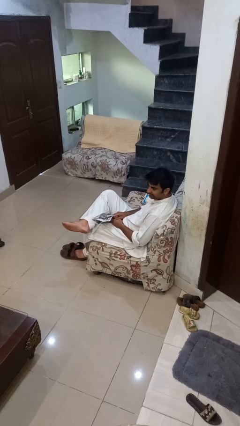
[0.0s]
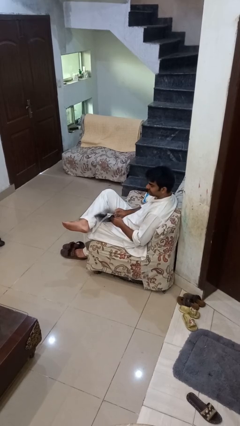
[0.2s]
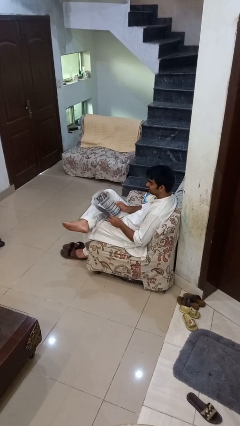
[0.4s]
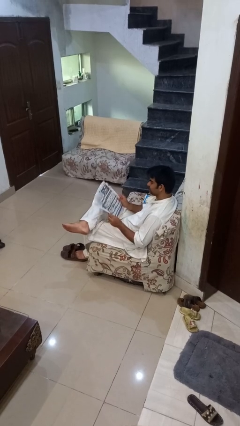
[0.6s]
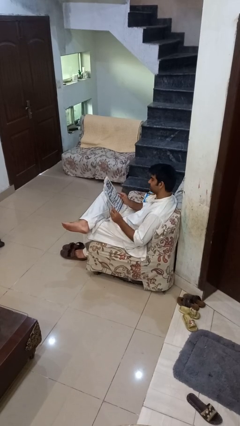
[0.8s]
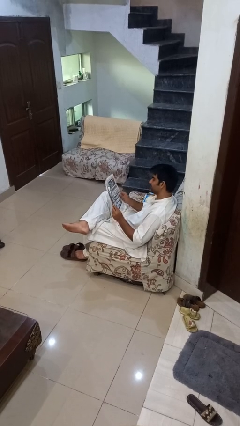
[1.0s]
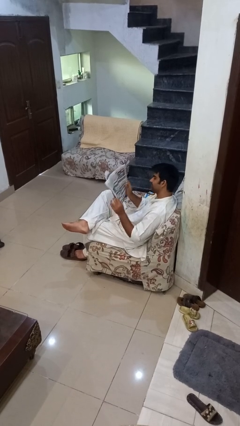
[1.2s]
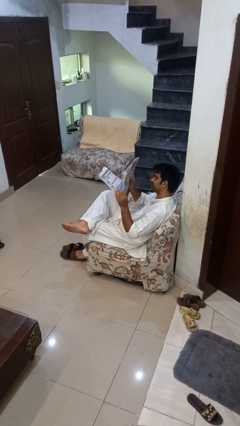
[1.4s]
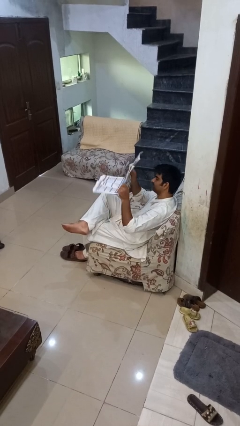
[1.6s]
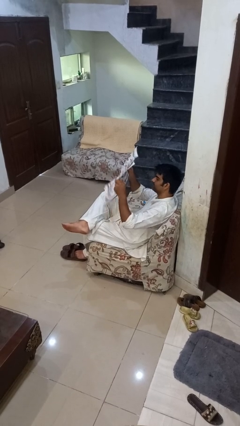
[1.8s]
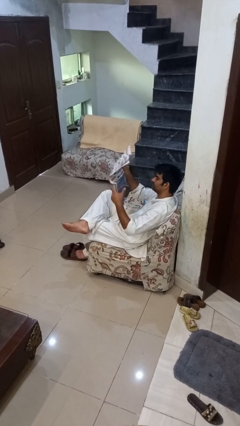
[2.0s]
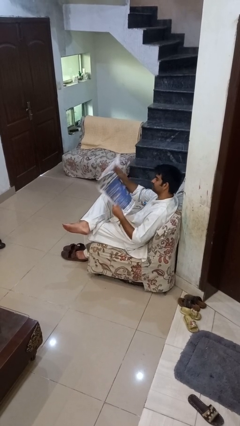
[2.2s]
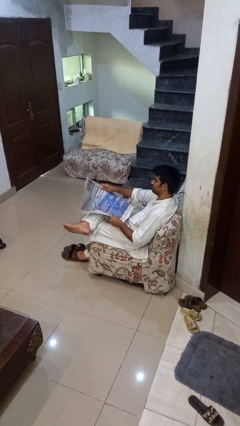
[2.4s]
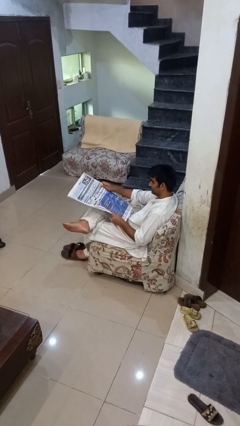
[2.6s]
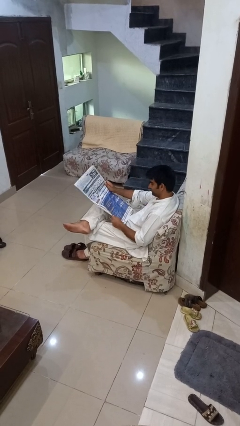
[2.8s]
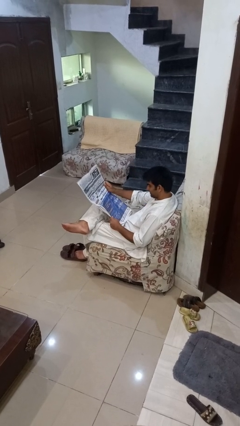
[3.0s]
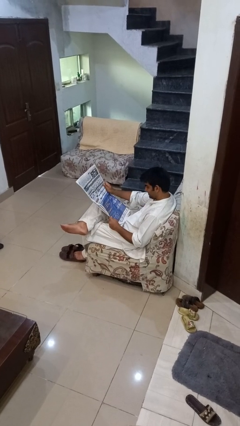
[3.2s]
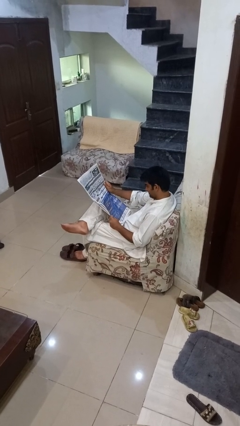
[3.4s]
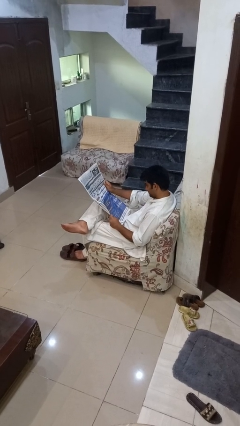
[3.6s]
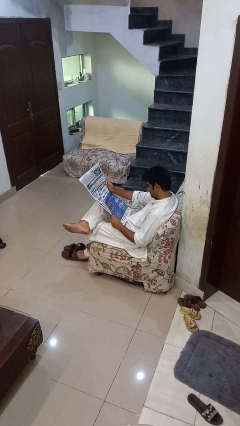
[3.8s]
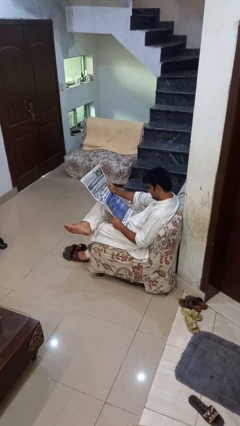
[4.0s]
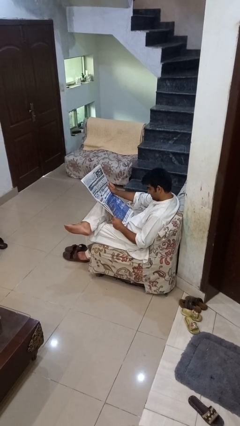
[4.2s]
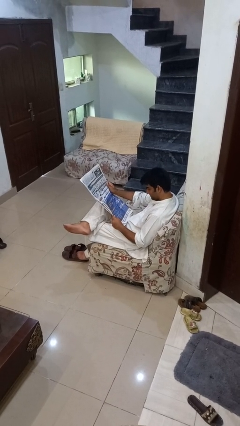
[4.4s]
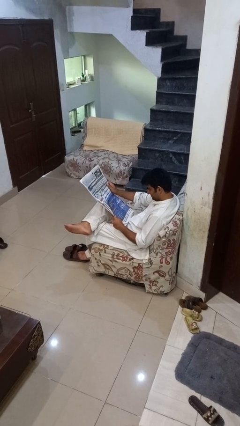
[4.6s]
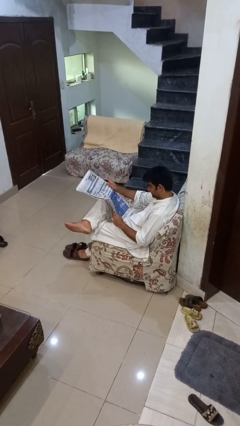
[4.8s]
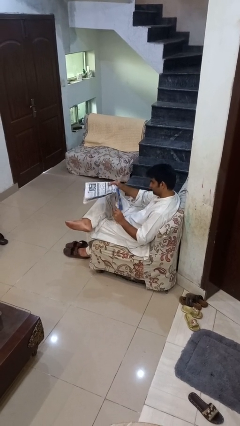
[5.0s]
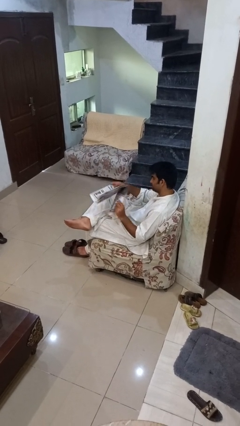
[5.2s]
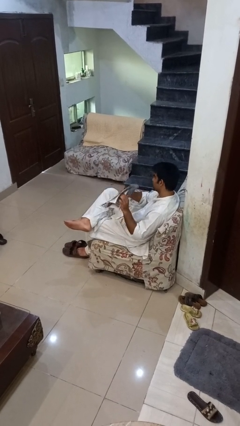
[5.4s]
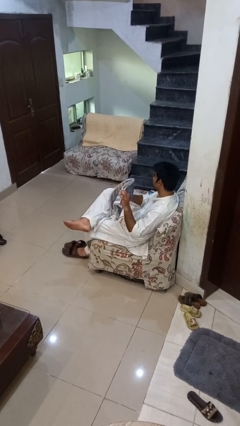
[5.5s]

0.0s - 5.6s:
person reads newspaper

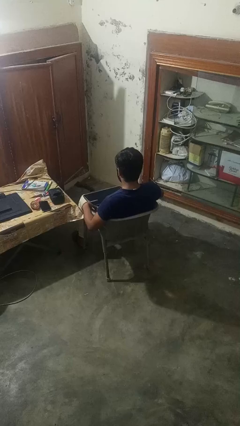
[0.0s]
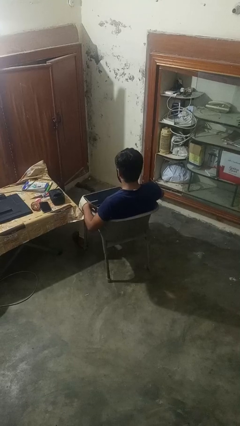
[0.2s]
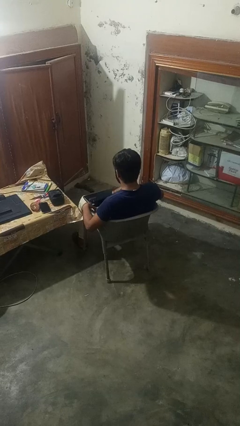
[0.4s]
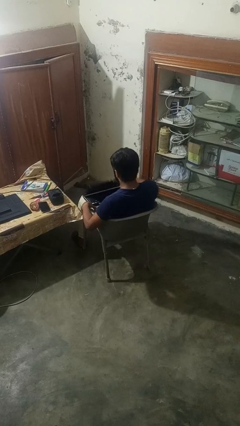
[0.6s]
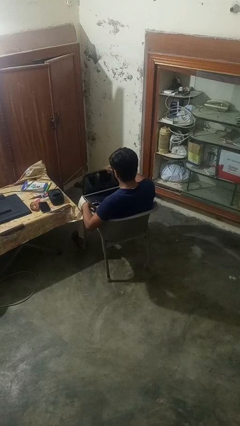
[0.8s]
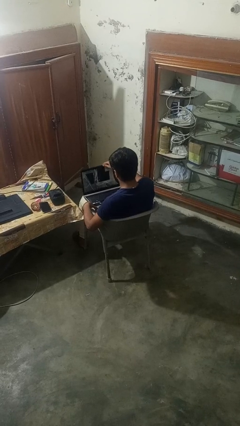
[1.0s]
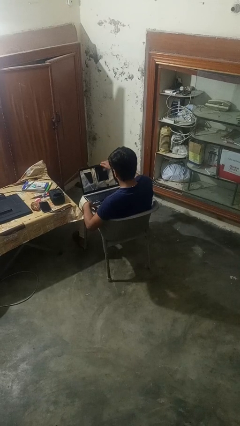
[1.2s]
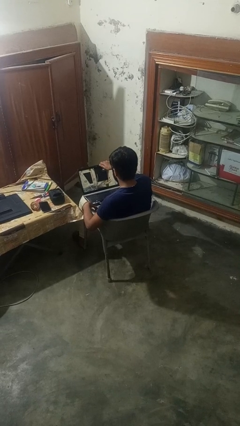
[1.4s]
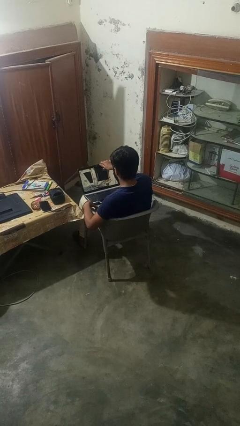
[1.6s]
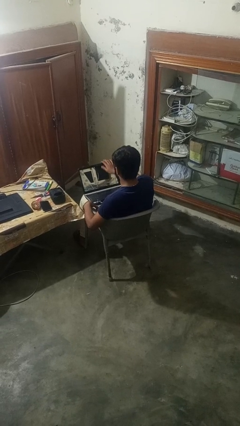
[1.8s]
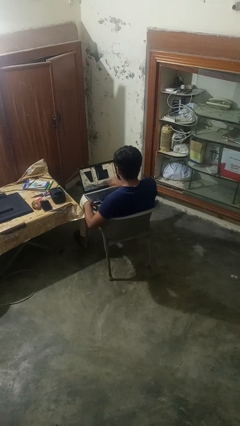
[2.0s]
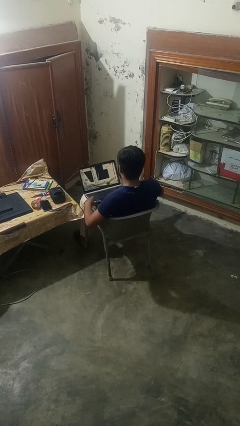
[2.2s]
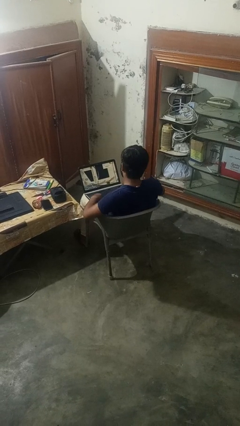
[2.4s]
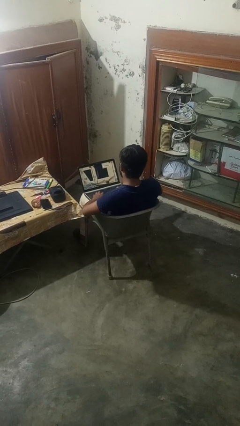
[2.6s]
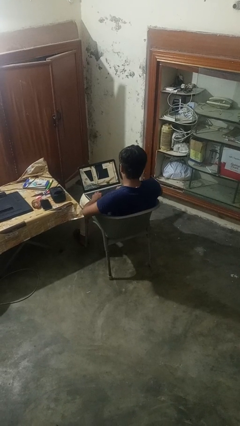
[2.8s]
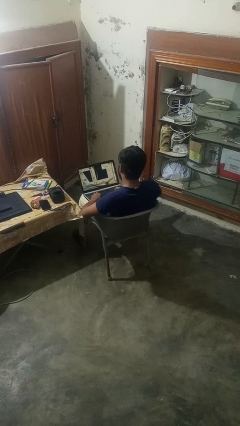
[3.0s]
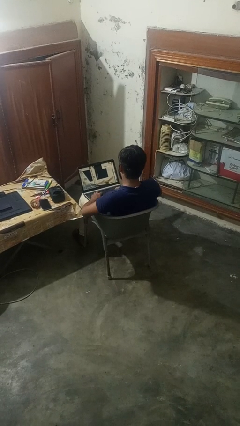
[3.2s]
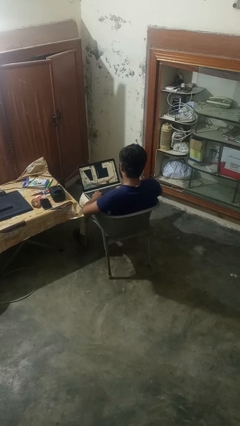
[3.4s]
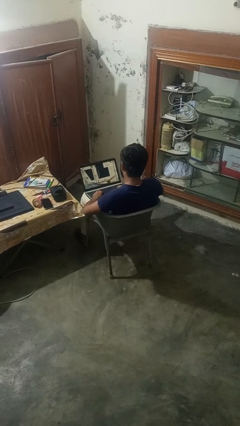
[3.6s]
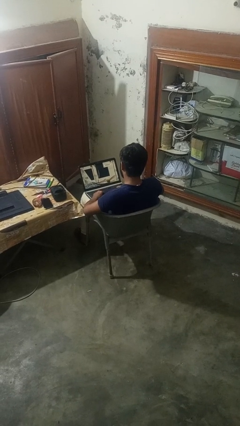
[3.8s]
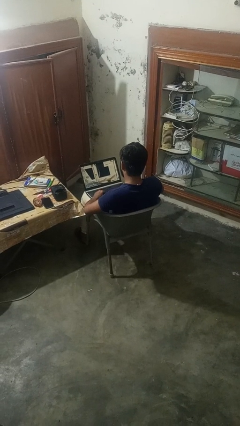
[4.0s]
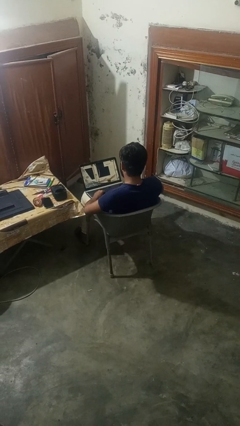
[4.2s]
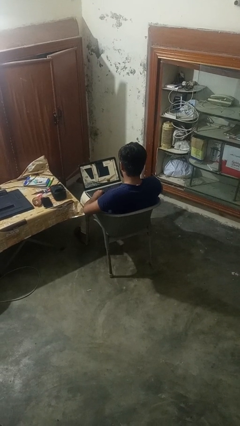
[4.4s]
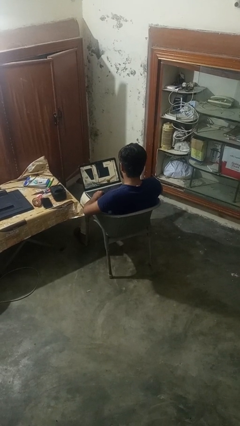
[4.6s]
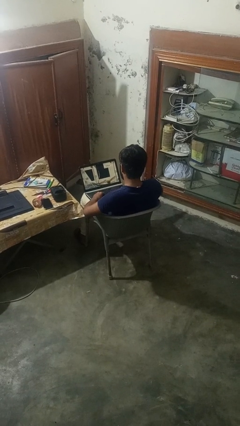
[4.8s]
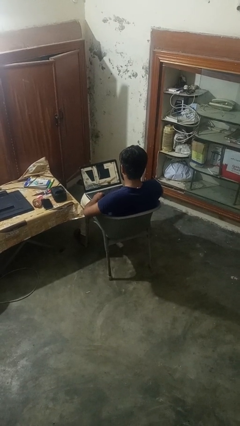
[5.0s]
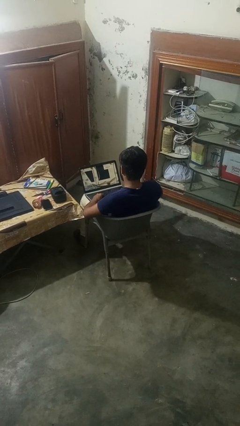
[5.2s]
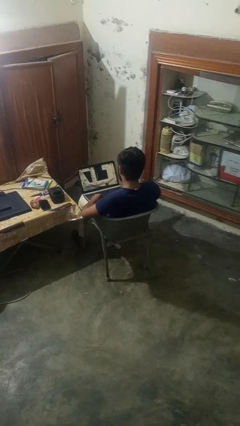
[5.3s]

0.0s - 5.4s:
person opens laptop

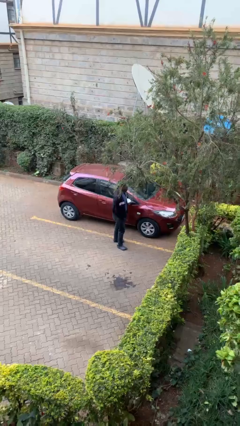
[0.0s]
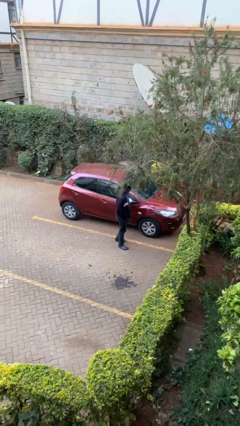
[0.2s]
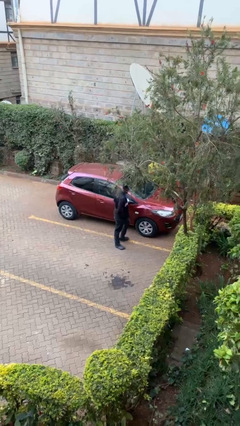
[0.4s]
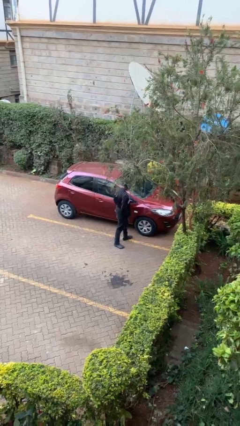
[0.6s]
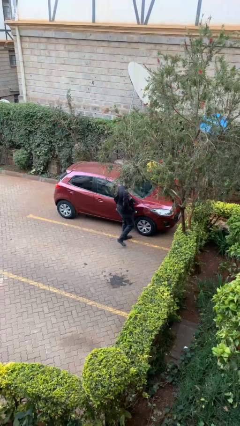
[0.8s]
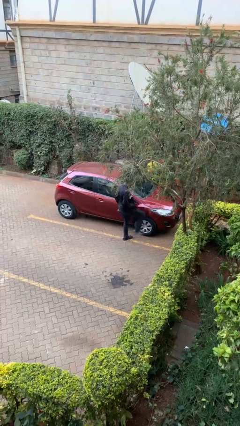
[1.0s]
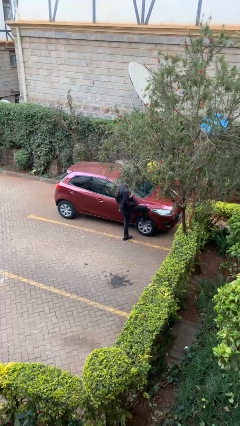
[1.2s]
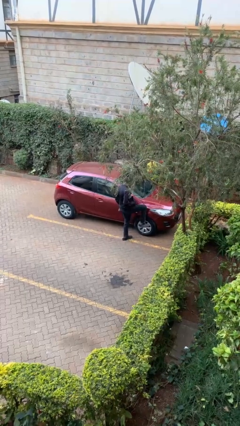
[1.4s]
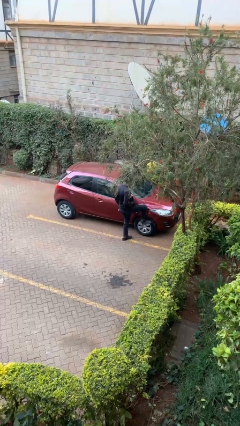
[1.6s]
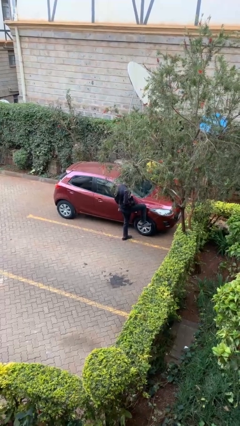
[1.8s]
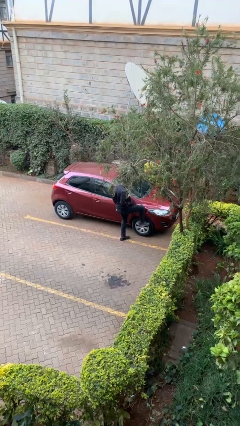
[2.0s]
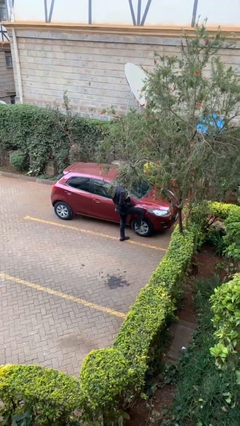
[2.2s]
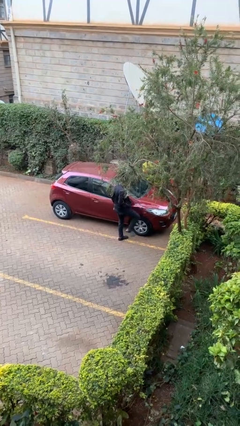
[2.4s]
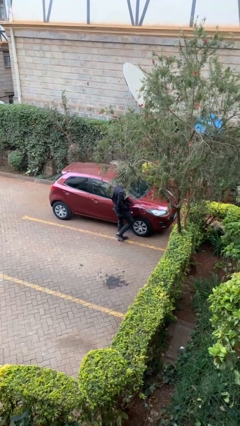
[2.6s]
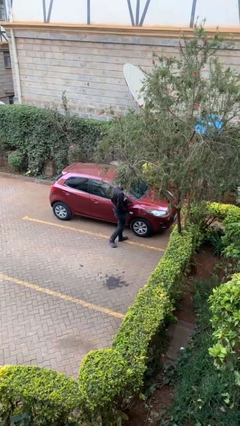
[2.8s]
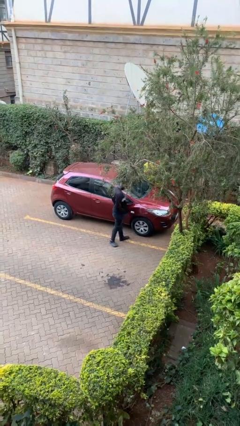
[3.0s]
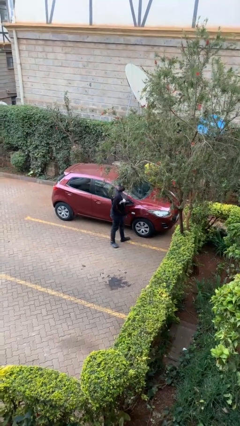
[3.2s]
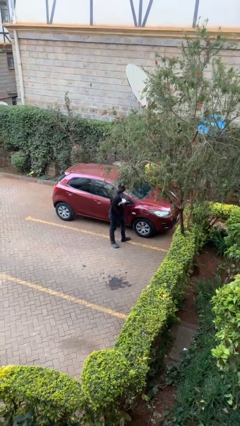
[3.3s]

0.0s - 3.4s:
person kicks car tires

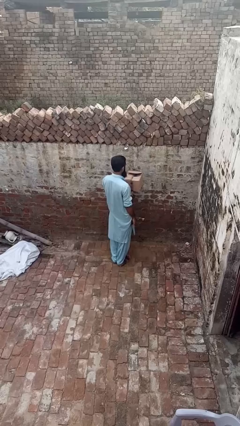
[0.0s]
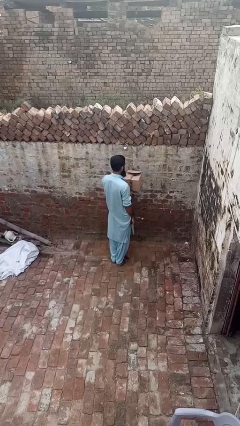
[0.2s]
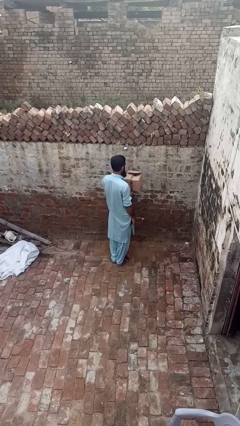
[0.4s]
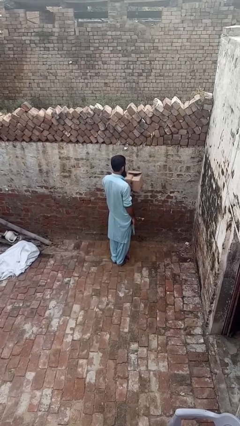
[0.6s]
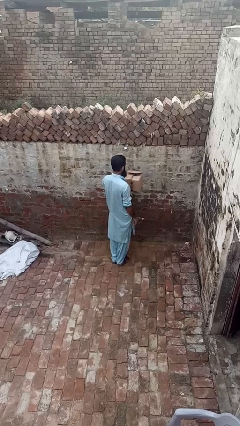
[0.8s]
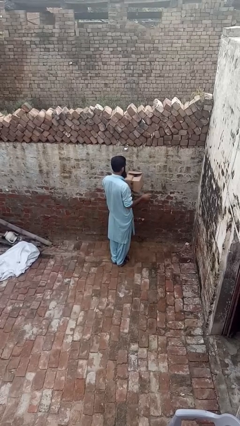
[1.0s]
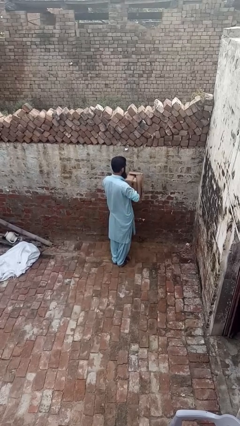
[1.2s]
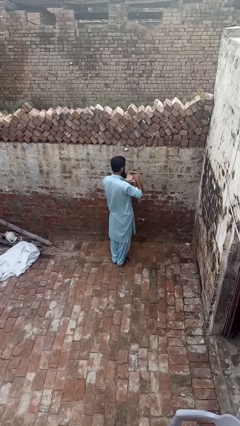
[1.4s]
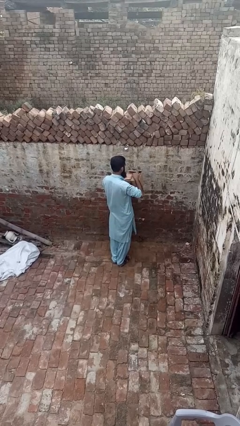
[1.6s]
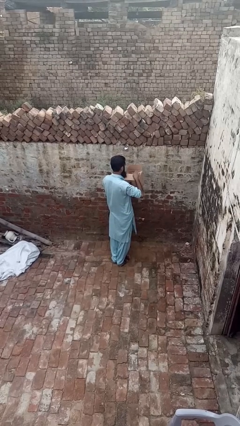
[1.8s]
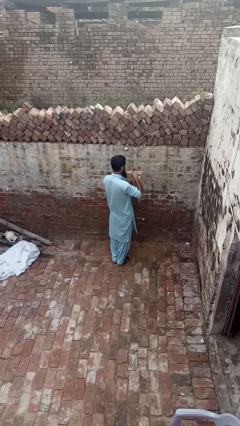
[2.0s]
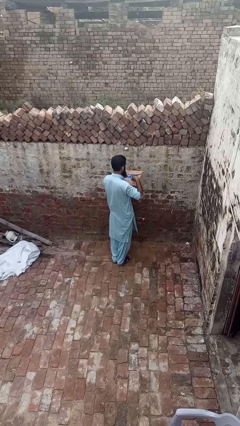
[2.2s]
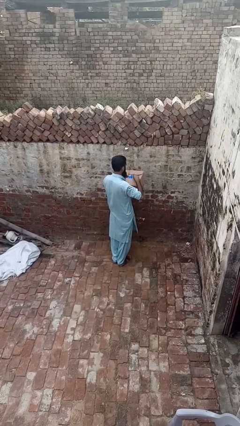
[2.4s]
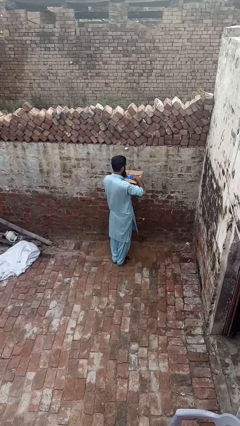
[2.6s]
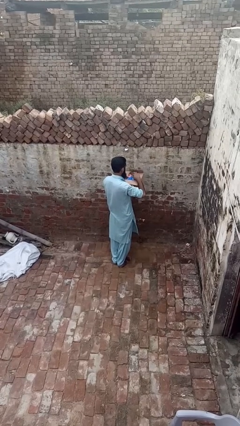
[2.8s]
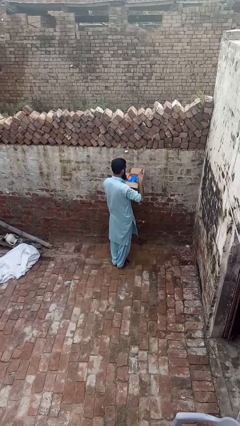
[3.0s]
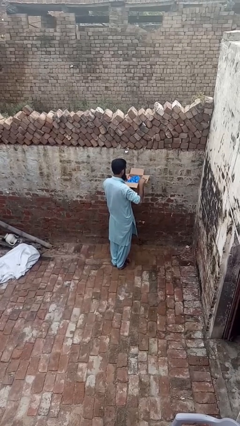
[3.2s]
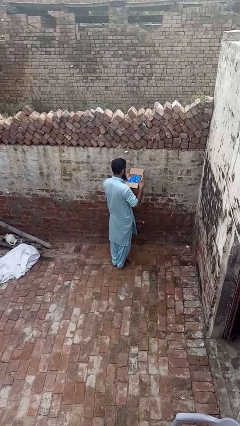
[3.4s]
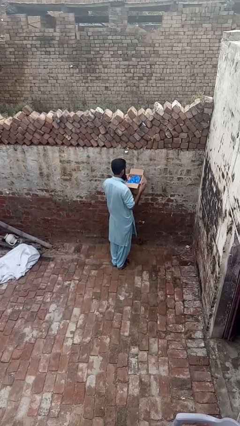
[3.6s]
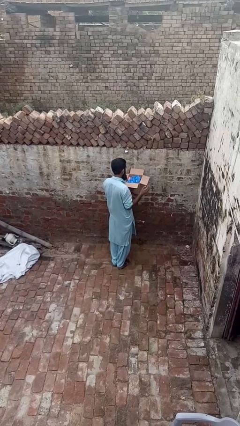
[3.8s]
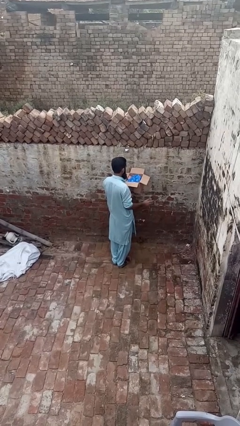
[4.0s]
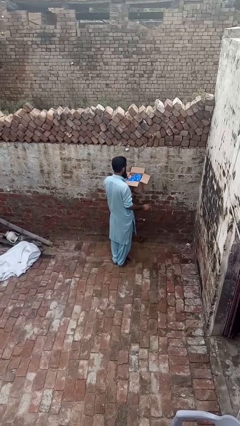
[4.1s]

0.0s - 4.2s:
person opens mailbox
